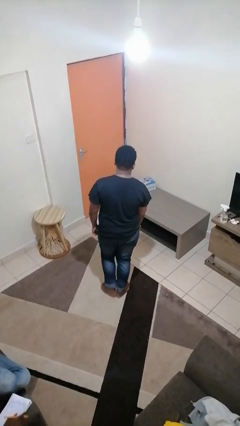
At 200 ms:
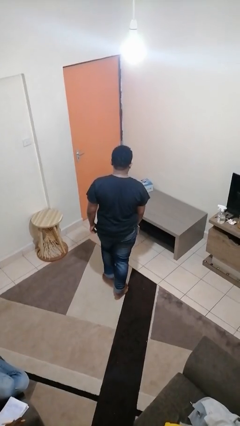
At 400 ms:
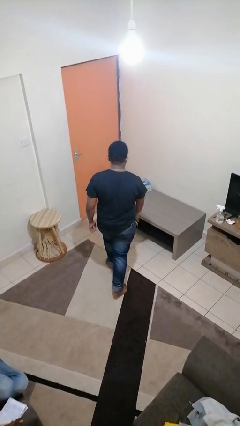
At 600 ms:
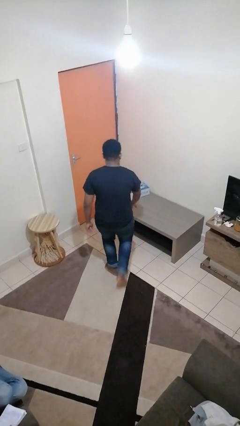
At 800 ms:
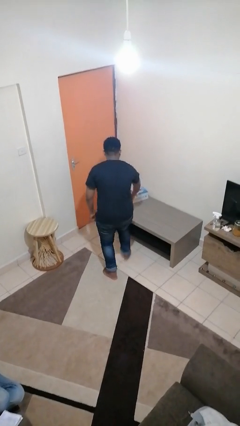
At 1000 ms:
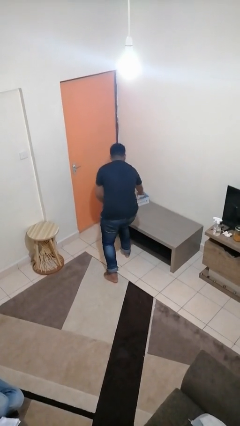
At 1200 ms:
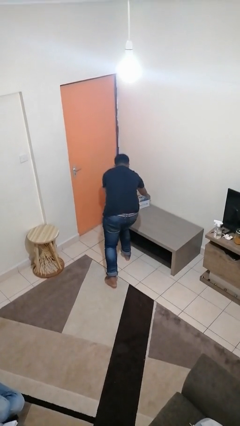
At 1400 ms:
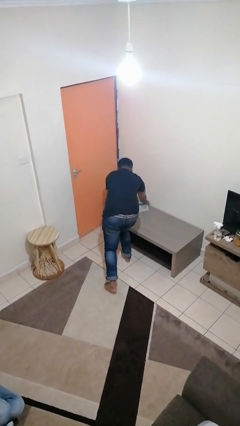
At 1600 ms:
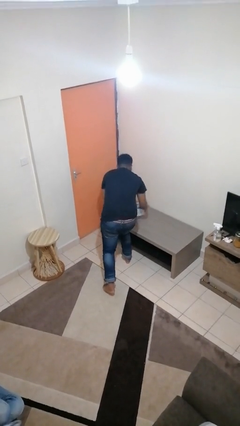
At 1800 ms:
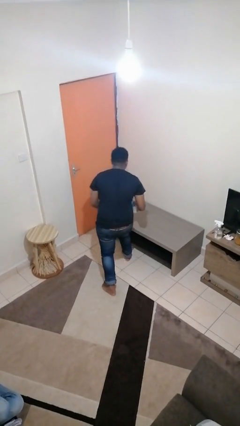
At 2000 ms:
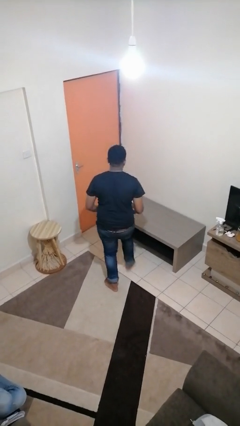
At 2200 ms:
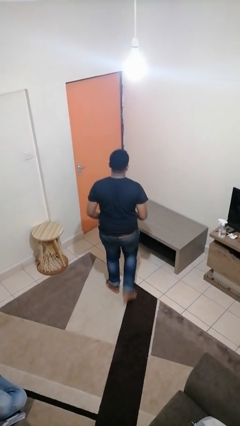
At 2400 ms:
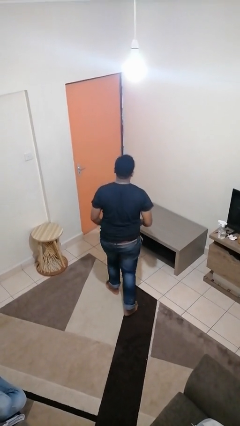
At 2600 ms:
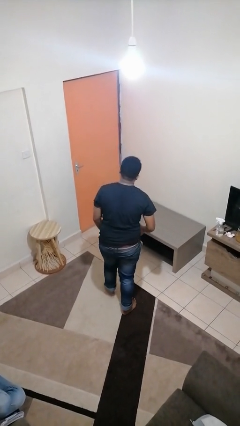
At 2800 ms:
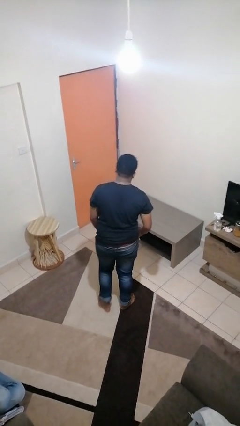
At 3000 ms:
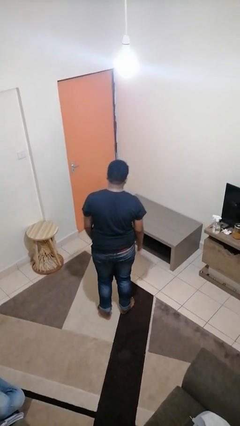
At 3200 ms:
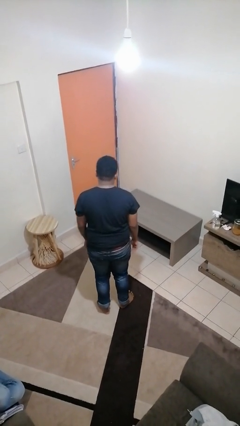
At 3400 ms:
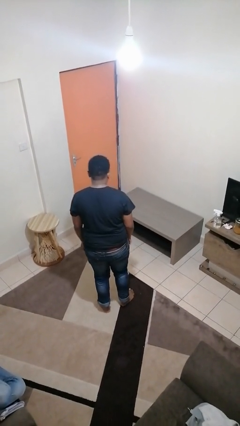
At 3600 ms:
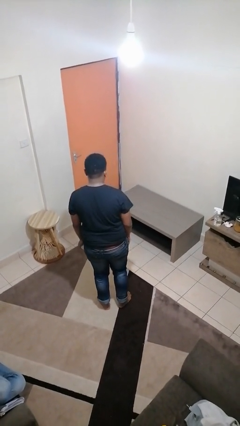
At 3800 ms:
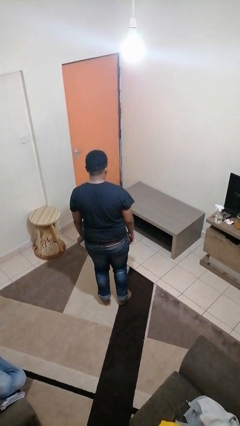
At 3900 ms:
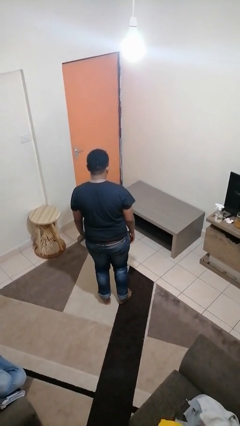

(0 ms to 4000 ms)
person picks up object from table

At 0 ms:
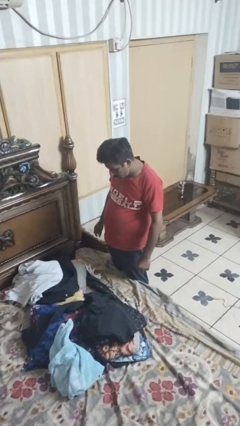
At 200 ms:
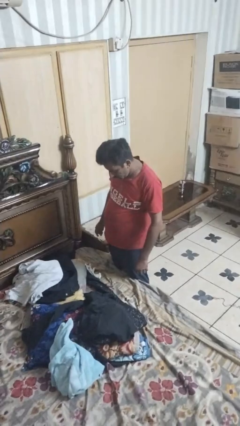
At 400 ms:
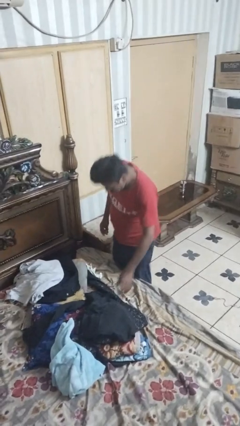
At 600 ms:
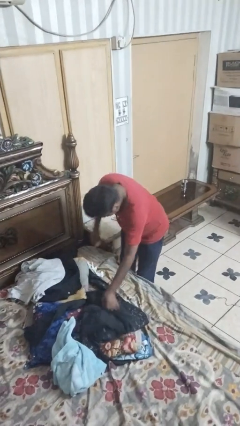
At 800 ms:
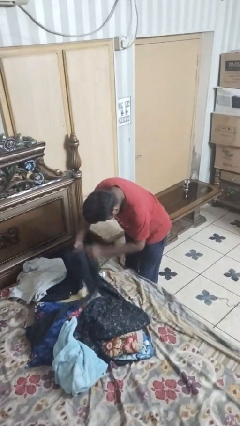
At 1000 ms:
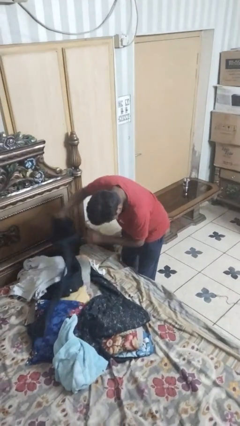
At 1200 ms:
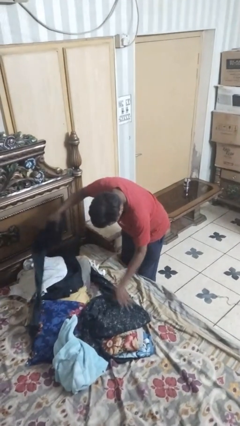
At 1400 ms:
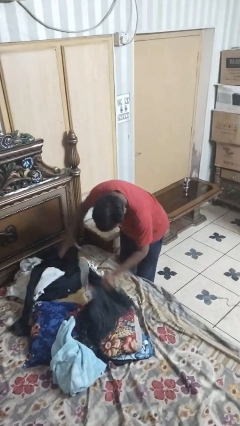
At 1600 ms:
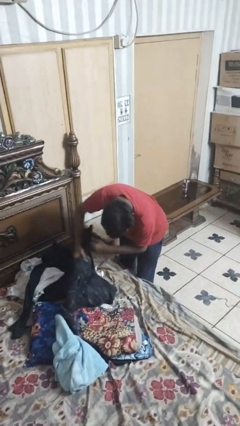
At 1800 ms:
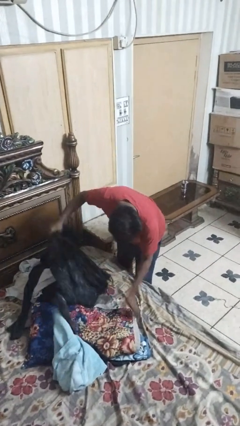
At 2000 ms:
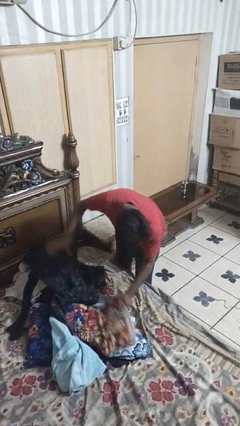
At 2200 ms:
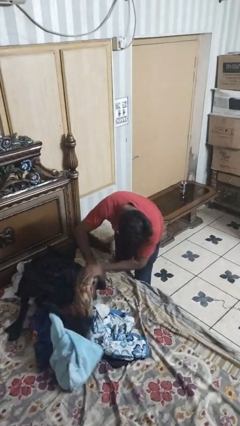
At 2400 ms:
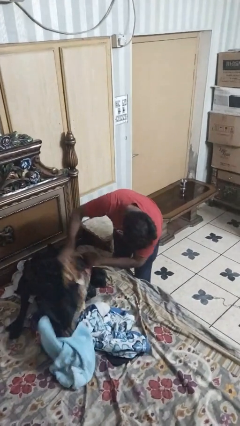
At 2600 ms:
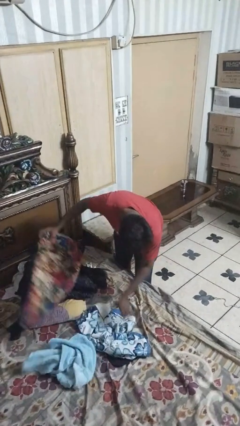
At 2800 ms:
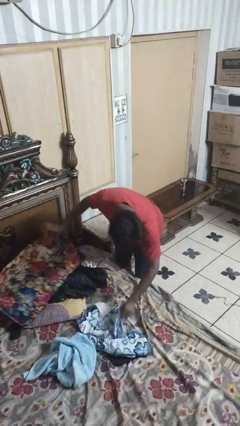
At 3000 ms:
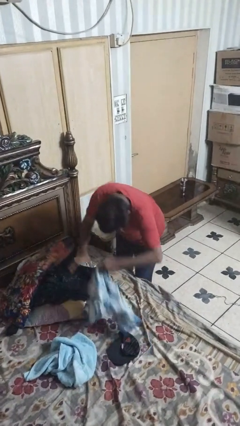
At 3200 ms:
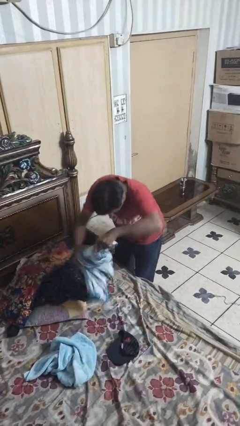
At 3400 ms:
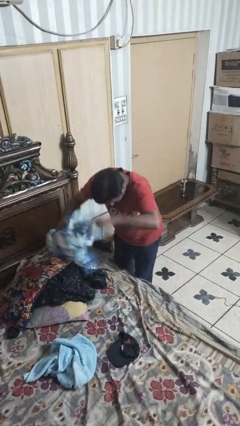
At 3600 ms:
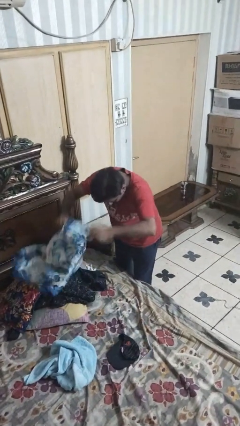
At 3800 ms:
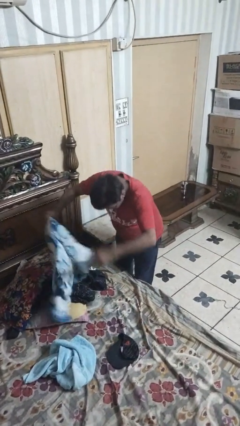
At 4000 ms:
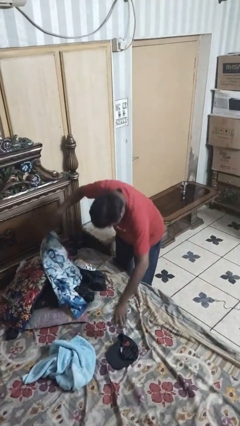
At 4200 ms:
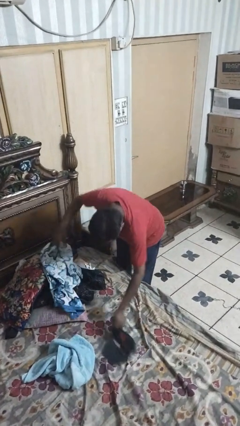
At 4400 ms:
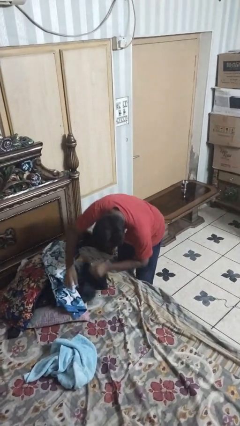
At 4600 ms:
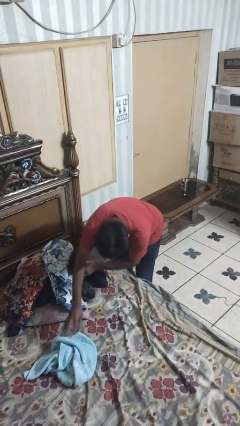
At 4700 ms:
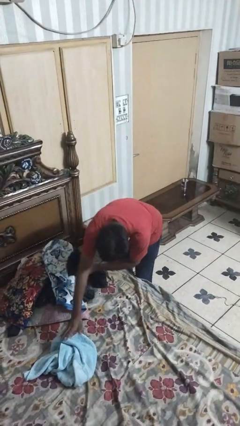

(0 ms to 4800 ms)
person searches under bed

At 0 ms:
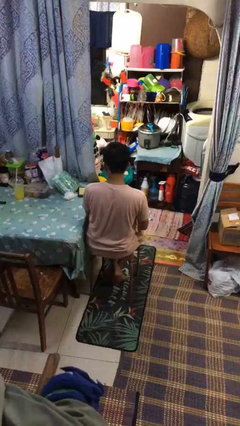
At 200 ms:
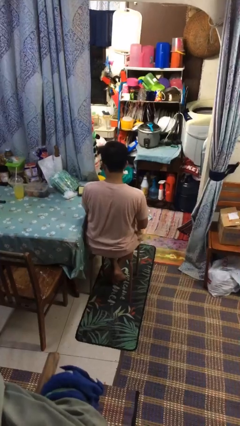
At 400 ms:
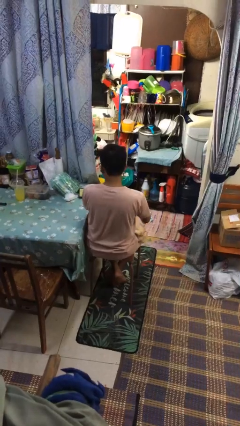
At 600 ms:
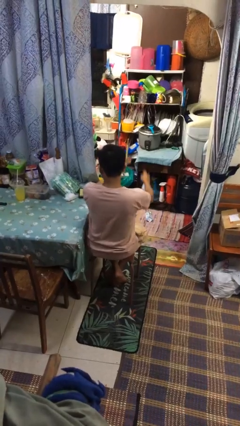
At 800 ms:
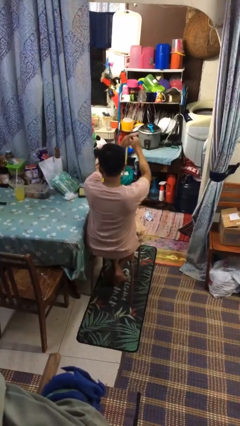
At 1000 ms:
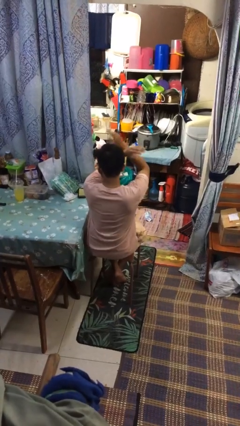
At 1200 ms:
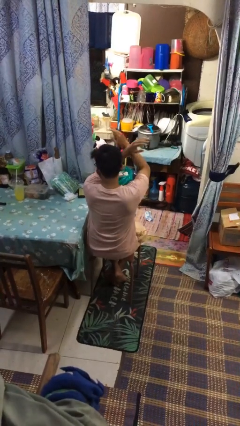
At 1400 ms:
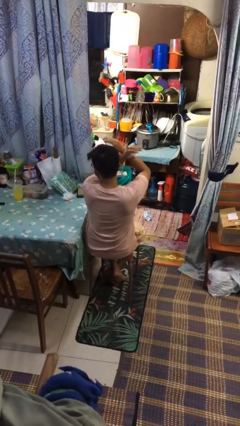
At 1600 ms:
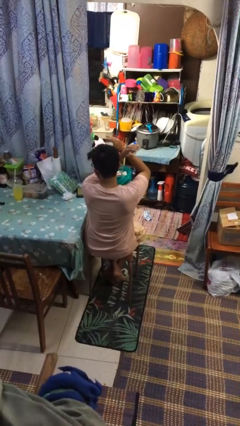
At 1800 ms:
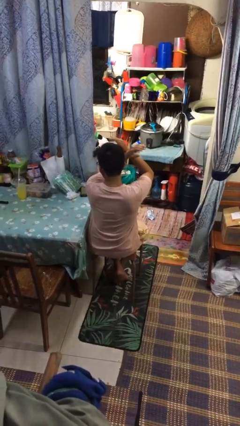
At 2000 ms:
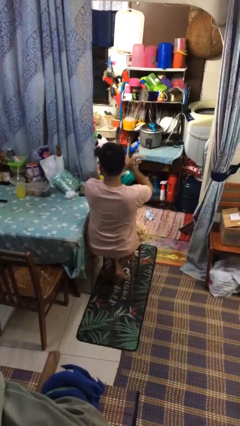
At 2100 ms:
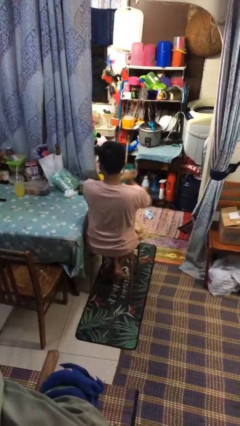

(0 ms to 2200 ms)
person gestures arms x

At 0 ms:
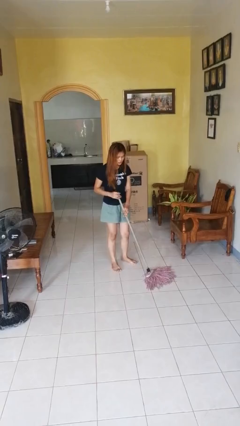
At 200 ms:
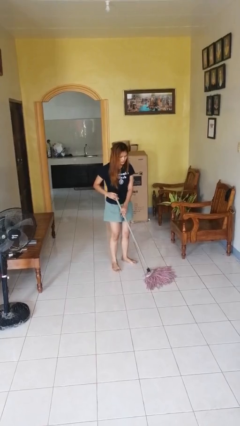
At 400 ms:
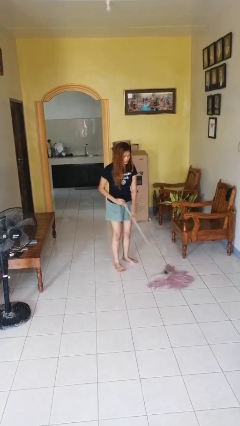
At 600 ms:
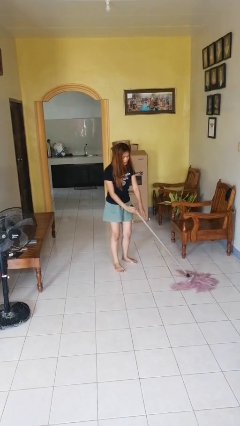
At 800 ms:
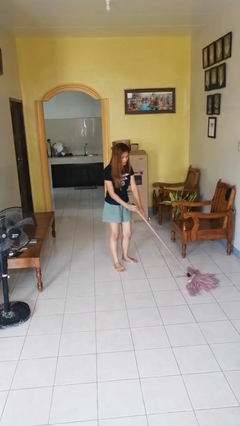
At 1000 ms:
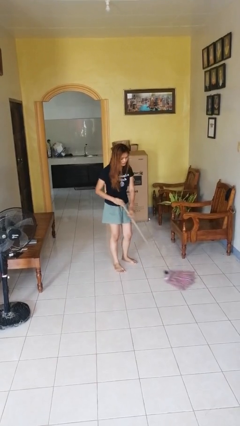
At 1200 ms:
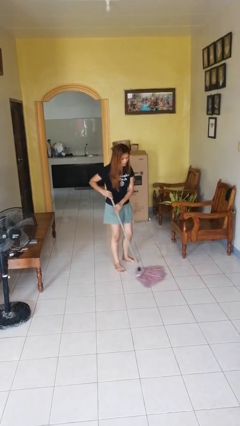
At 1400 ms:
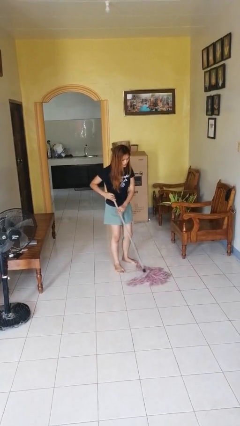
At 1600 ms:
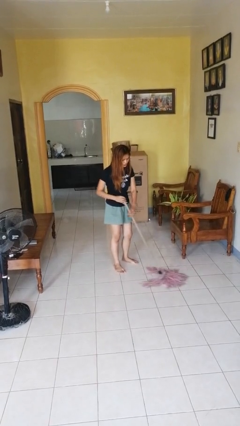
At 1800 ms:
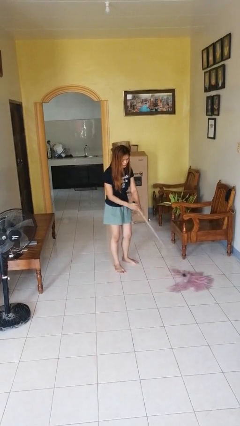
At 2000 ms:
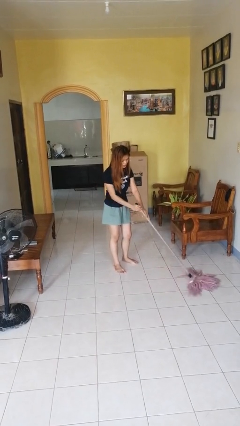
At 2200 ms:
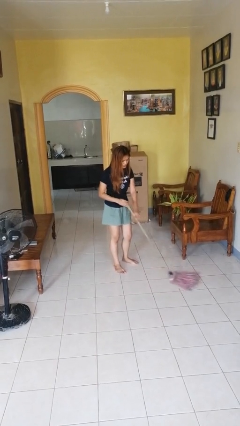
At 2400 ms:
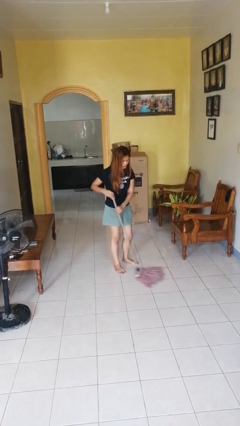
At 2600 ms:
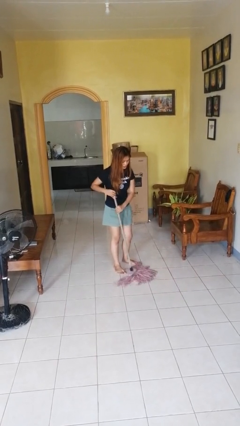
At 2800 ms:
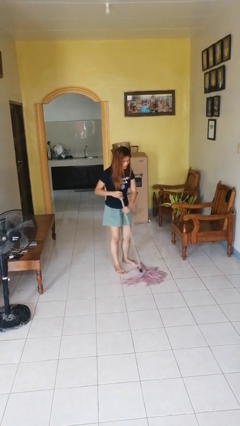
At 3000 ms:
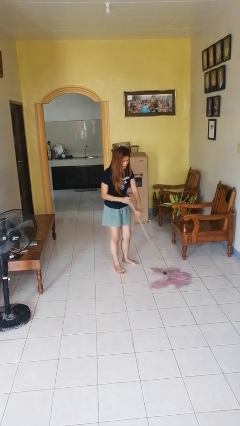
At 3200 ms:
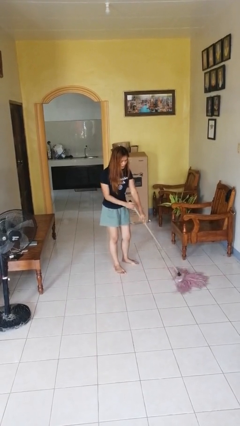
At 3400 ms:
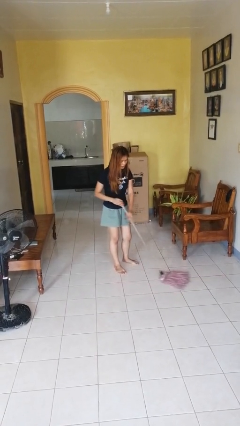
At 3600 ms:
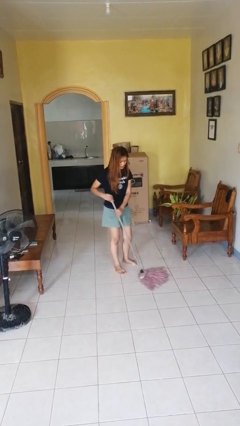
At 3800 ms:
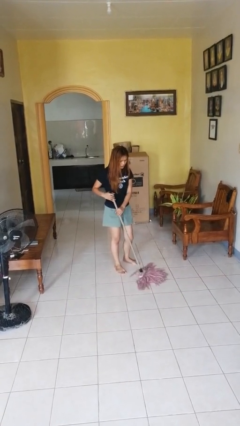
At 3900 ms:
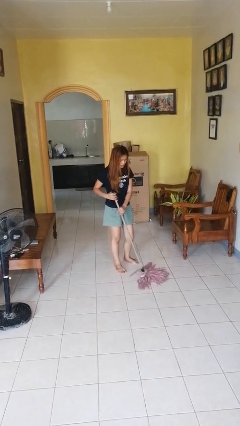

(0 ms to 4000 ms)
person mops

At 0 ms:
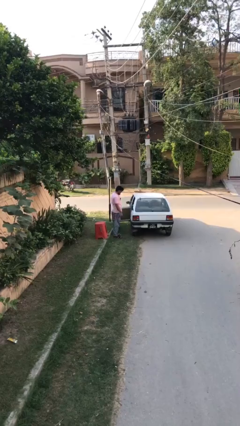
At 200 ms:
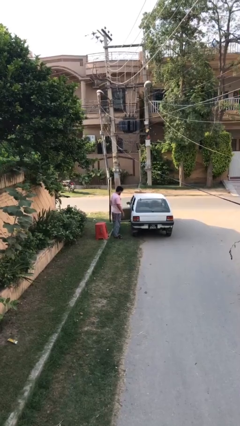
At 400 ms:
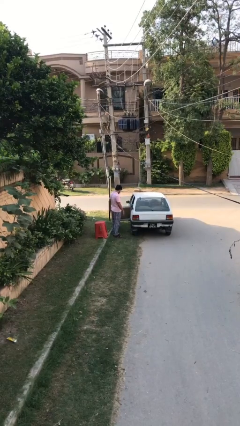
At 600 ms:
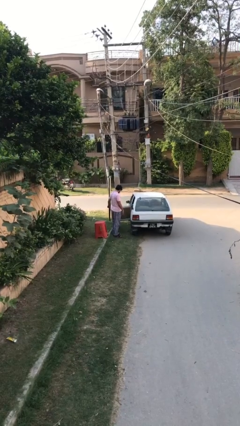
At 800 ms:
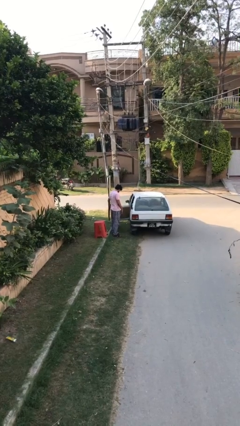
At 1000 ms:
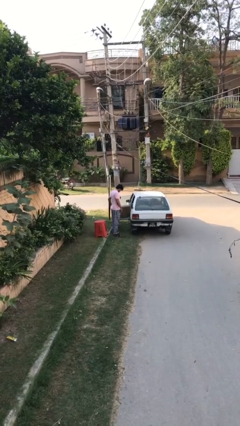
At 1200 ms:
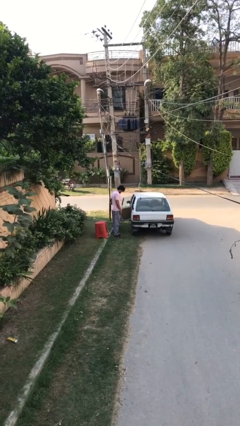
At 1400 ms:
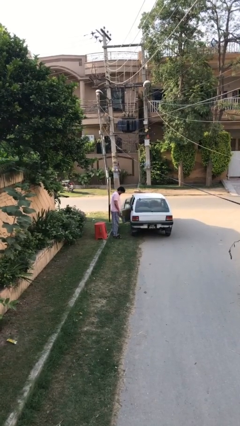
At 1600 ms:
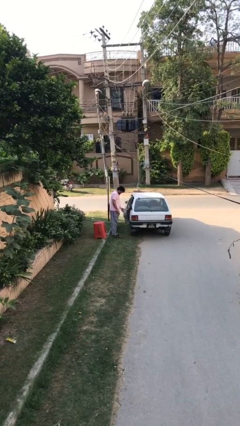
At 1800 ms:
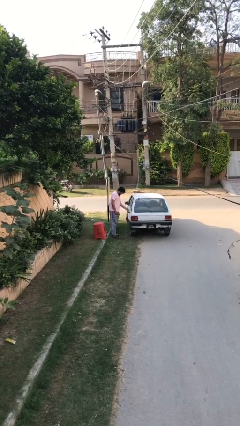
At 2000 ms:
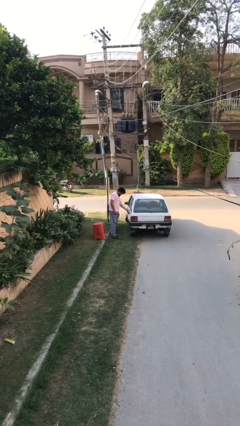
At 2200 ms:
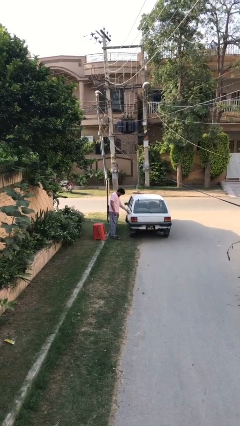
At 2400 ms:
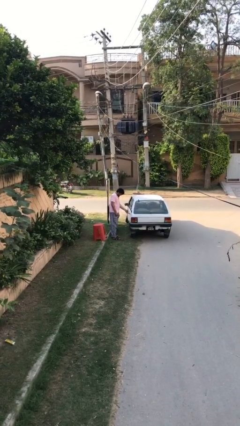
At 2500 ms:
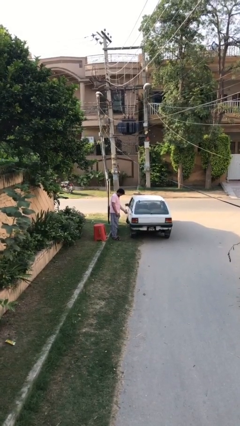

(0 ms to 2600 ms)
person closes car door
